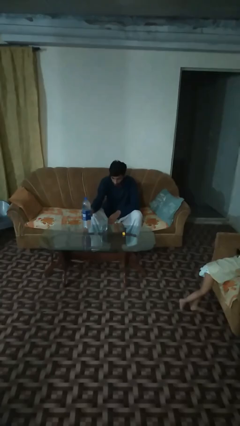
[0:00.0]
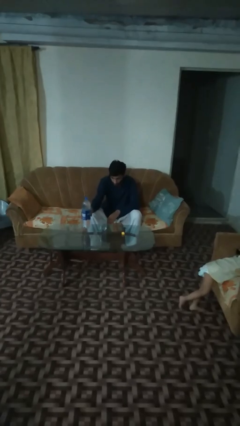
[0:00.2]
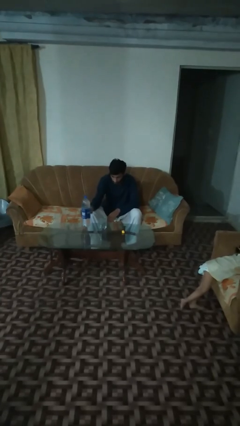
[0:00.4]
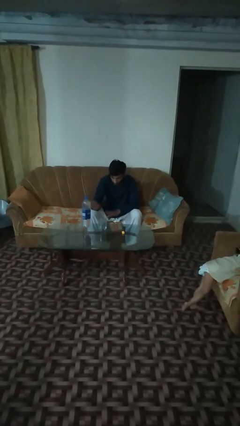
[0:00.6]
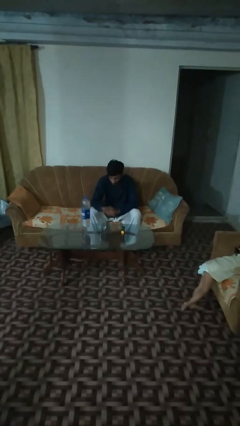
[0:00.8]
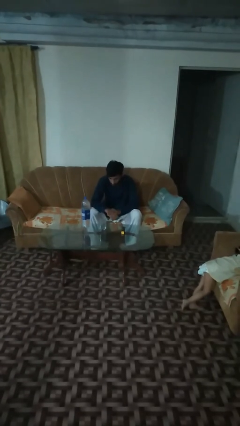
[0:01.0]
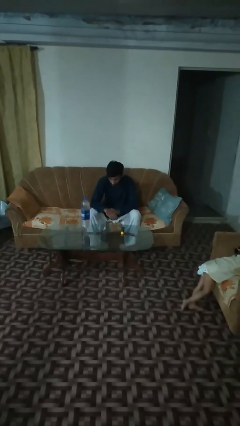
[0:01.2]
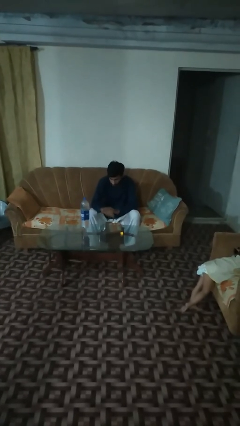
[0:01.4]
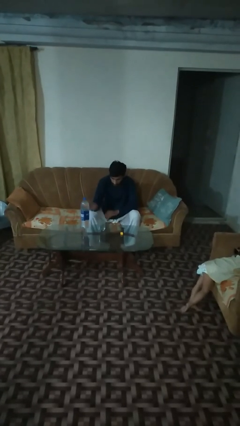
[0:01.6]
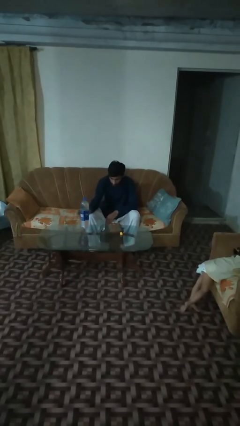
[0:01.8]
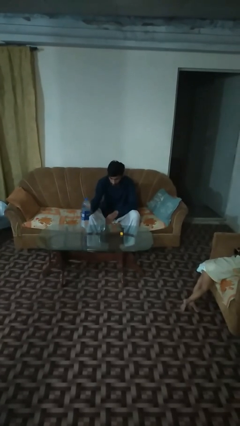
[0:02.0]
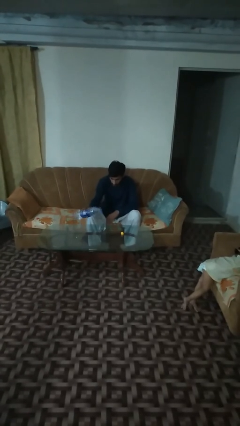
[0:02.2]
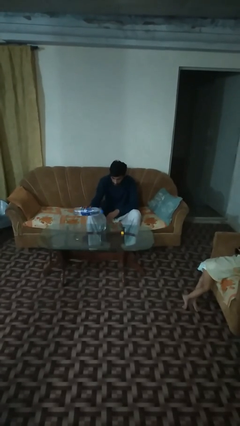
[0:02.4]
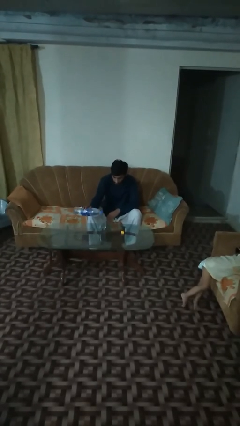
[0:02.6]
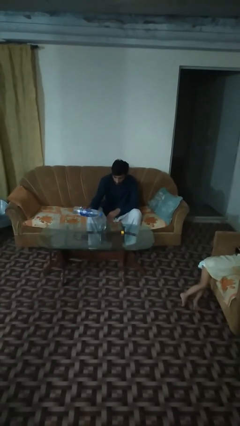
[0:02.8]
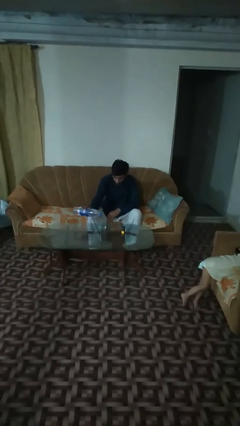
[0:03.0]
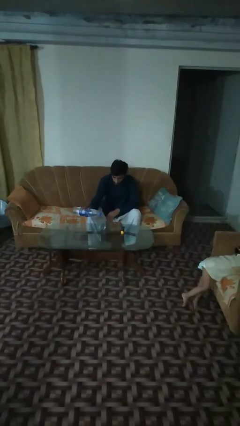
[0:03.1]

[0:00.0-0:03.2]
person pours liquid into cup

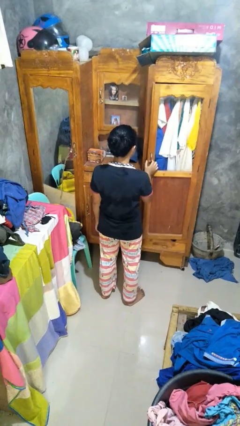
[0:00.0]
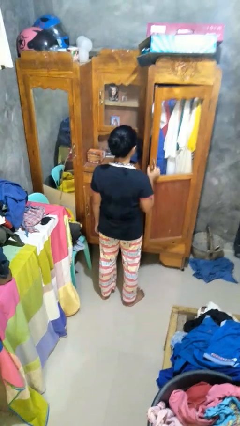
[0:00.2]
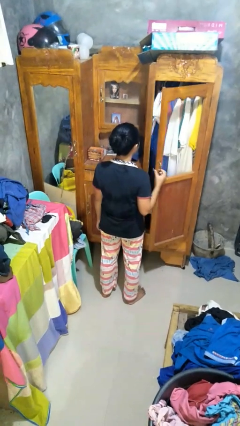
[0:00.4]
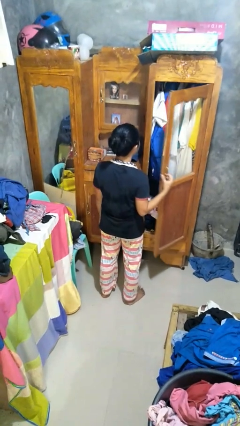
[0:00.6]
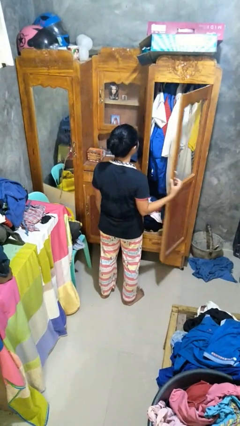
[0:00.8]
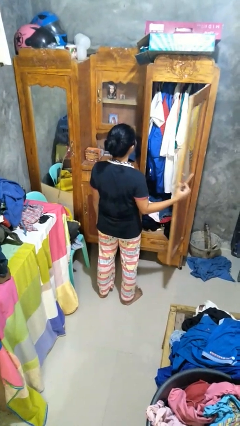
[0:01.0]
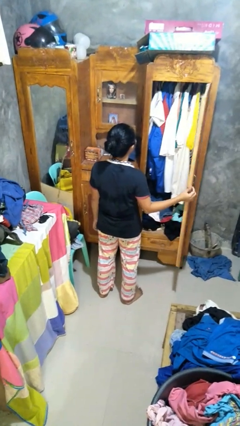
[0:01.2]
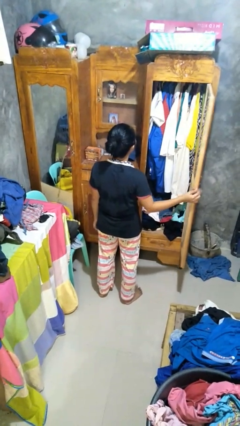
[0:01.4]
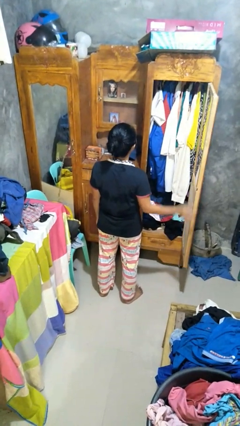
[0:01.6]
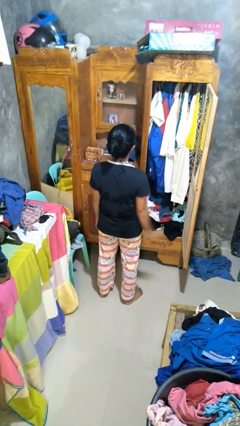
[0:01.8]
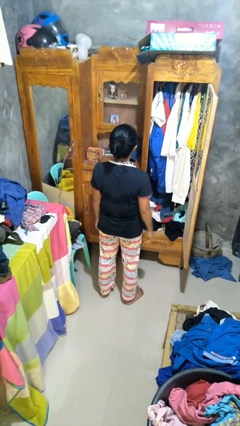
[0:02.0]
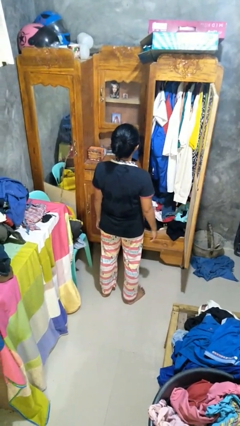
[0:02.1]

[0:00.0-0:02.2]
person opens closet door

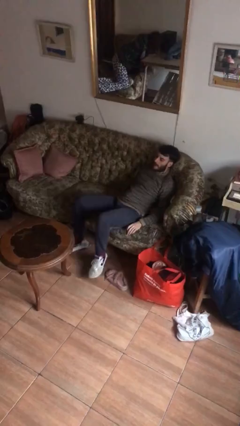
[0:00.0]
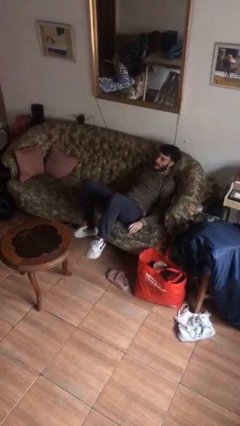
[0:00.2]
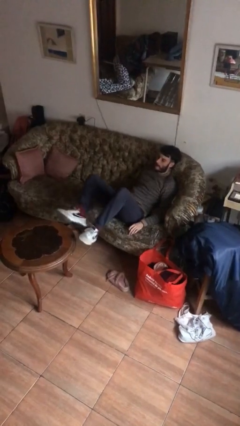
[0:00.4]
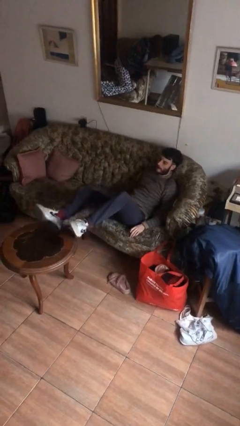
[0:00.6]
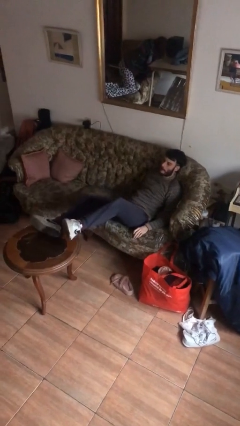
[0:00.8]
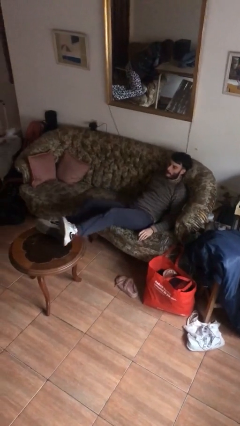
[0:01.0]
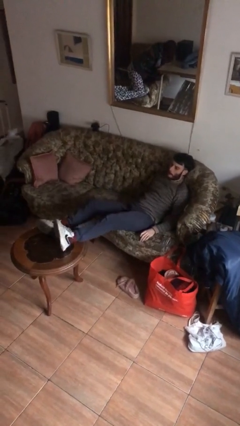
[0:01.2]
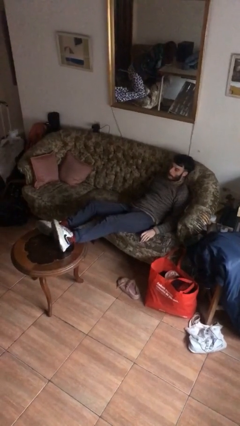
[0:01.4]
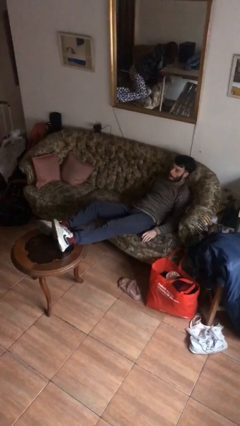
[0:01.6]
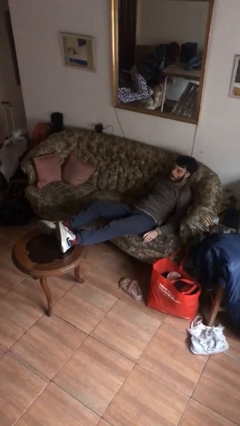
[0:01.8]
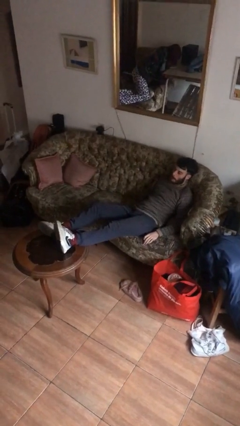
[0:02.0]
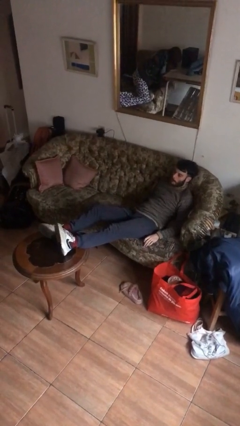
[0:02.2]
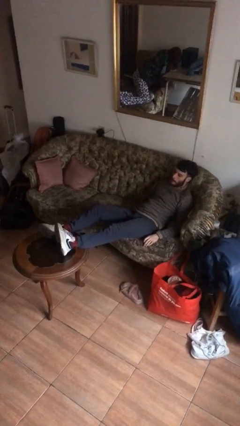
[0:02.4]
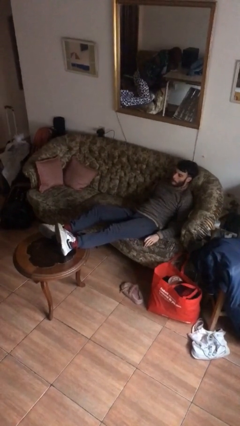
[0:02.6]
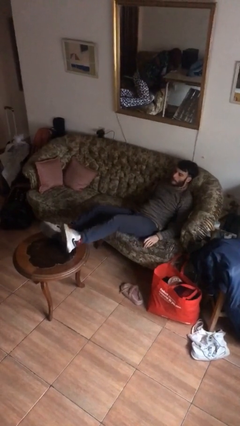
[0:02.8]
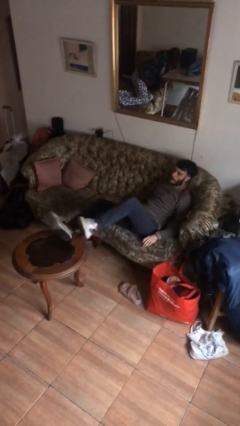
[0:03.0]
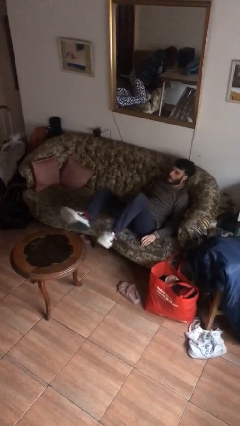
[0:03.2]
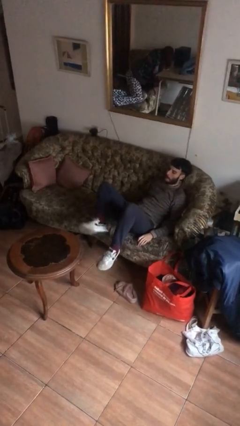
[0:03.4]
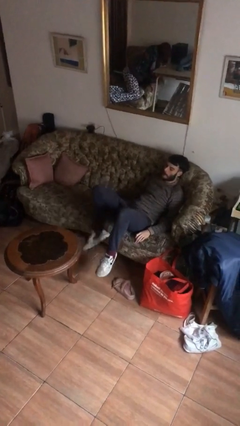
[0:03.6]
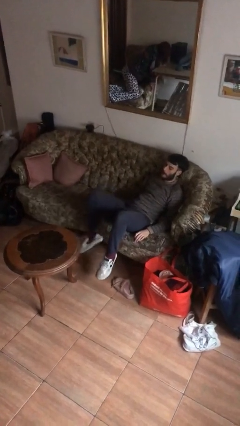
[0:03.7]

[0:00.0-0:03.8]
person puts feet up

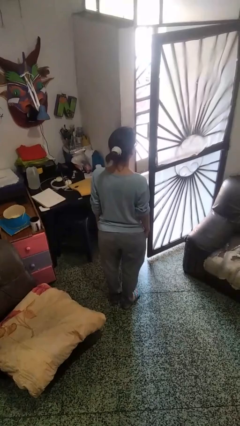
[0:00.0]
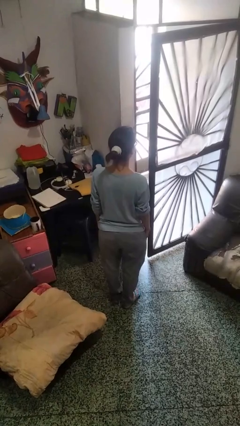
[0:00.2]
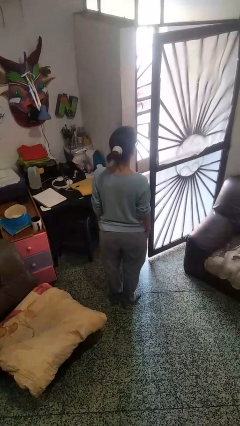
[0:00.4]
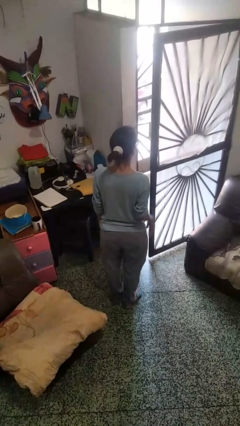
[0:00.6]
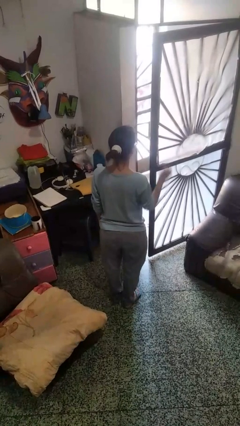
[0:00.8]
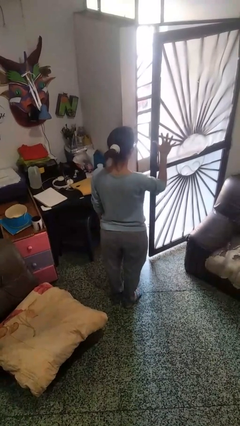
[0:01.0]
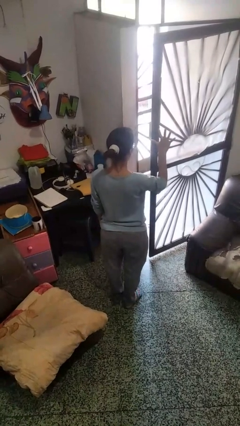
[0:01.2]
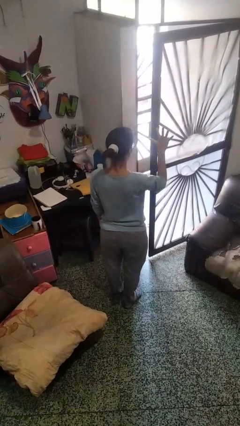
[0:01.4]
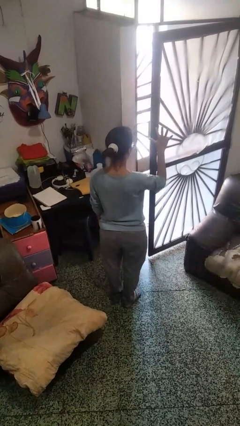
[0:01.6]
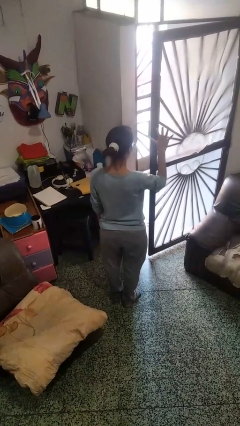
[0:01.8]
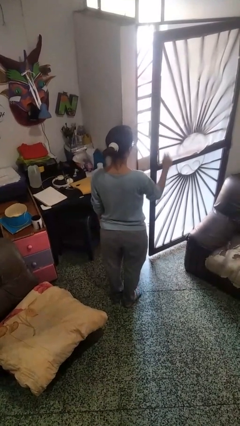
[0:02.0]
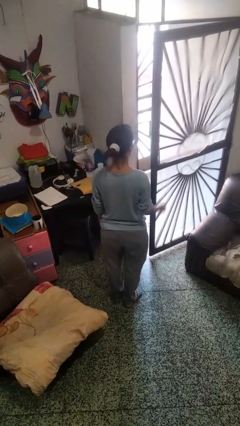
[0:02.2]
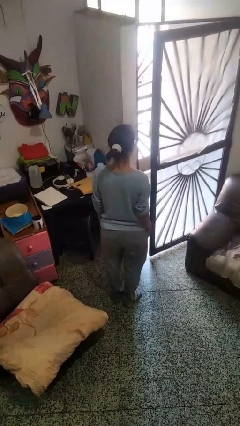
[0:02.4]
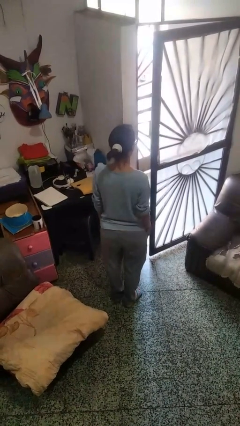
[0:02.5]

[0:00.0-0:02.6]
person gestures number five

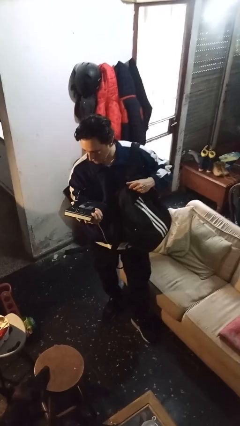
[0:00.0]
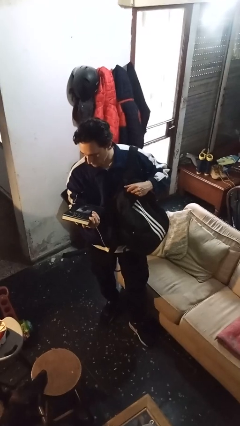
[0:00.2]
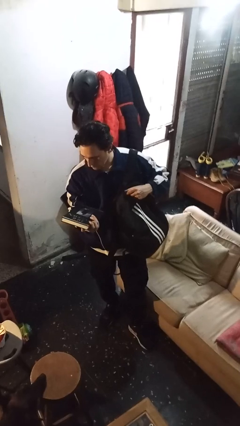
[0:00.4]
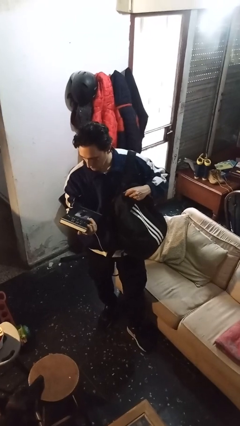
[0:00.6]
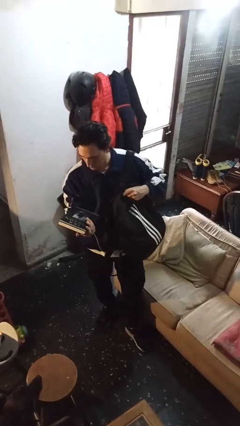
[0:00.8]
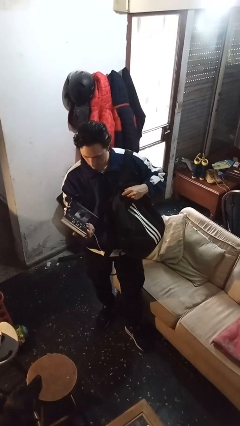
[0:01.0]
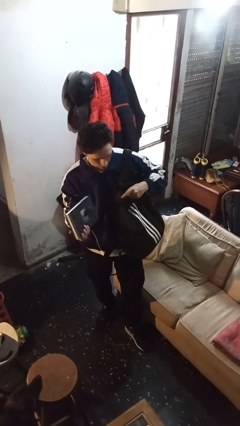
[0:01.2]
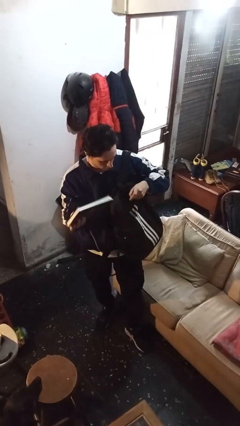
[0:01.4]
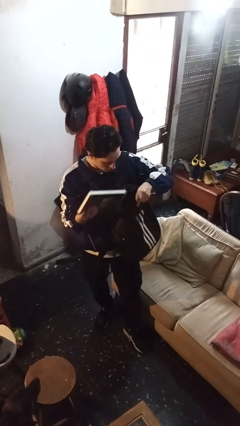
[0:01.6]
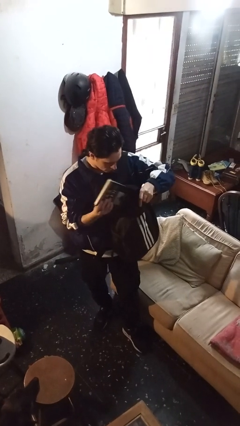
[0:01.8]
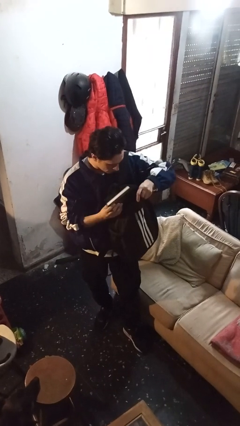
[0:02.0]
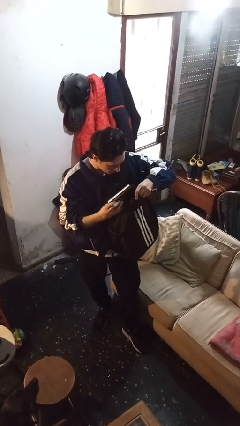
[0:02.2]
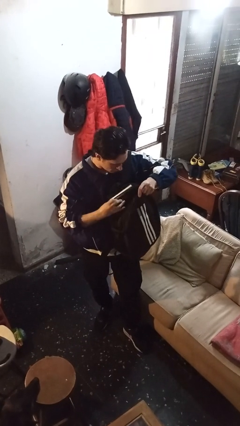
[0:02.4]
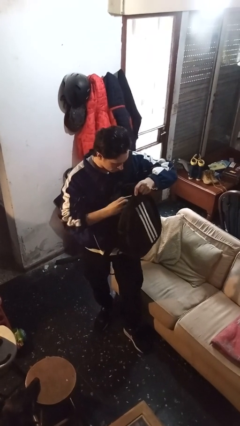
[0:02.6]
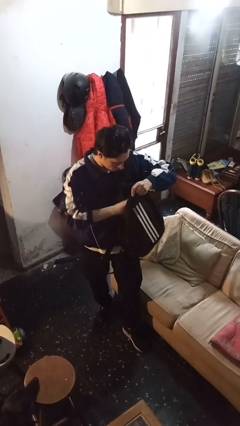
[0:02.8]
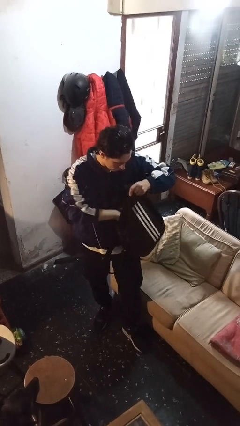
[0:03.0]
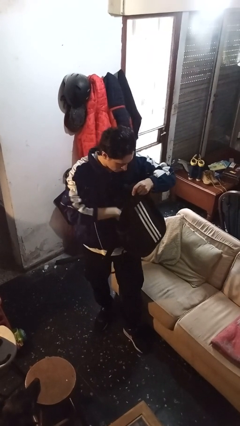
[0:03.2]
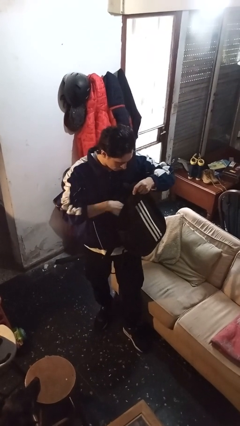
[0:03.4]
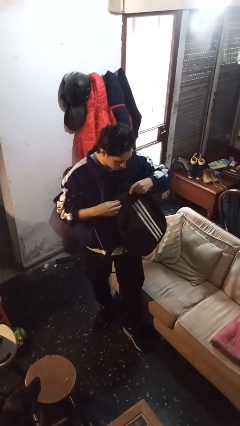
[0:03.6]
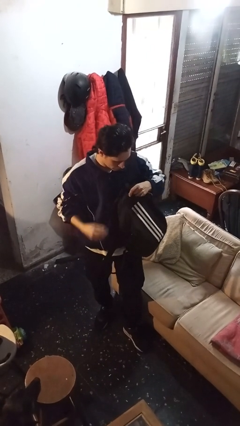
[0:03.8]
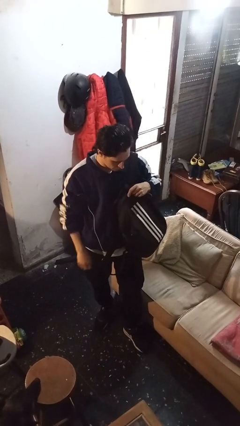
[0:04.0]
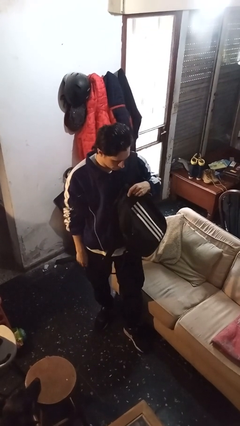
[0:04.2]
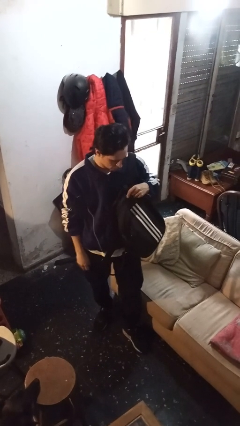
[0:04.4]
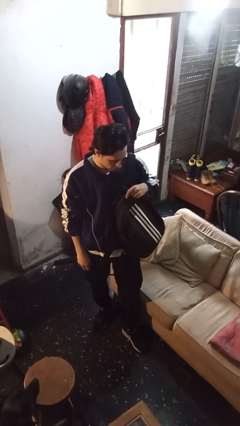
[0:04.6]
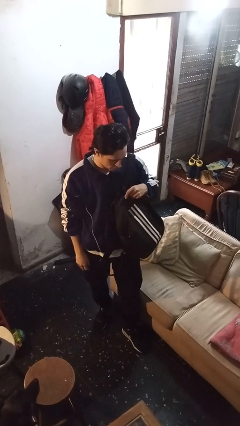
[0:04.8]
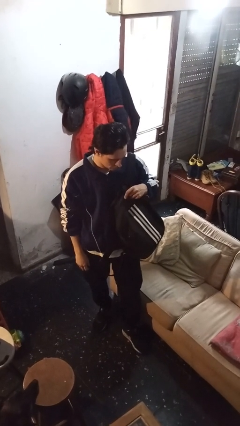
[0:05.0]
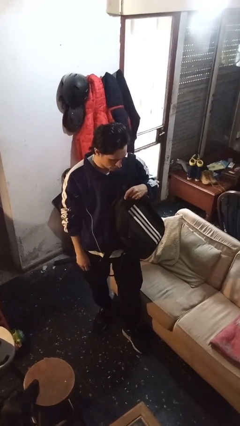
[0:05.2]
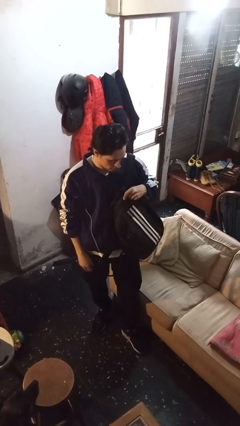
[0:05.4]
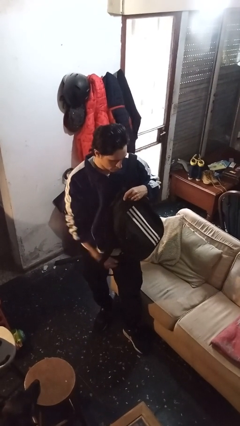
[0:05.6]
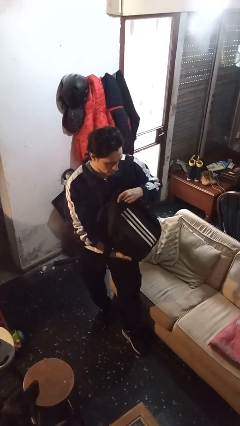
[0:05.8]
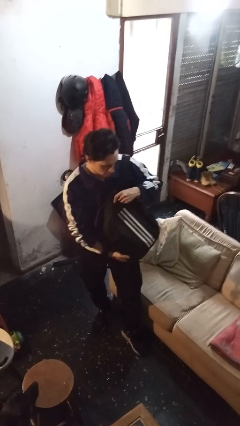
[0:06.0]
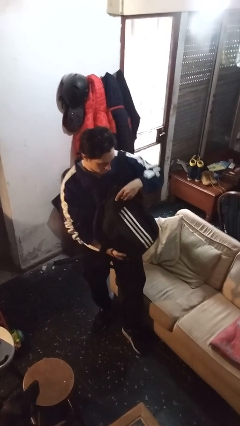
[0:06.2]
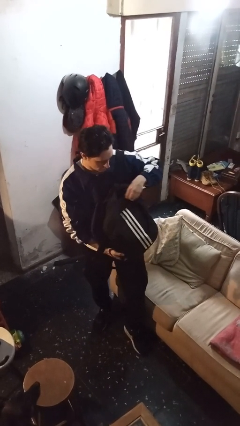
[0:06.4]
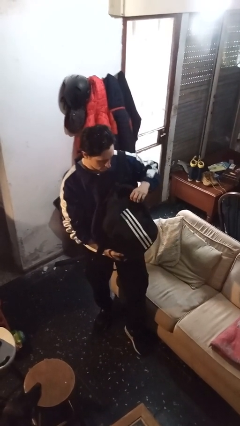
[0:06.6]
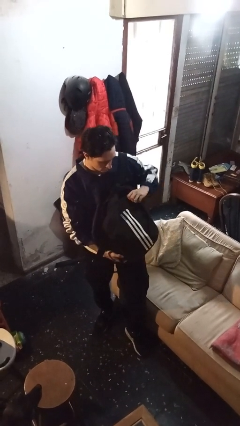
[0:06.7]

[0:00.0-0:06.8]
person puts object into backpack
